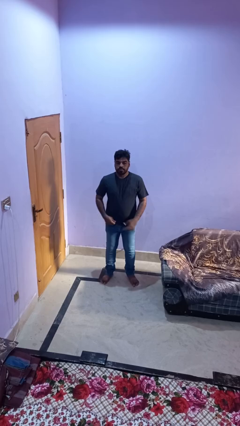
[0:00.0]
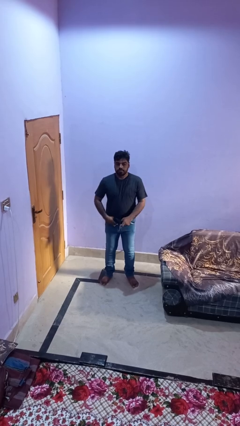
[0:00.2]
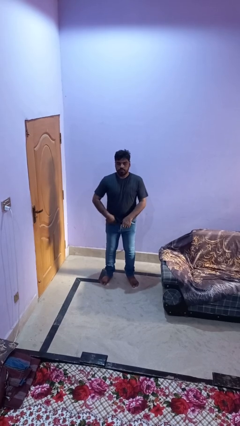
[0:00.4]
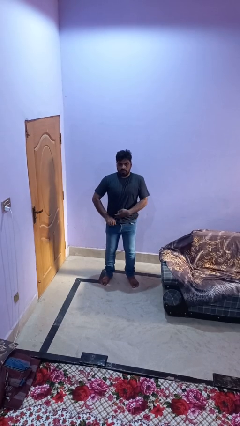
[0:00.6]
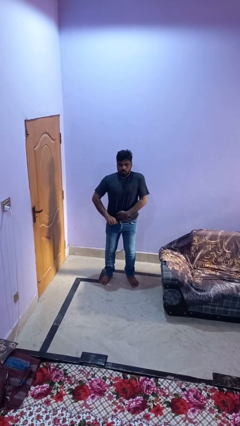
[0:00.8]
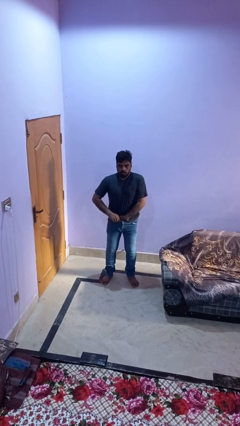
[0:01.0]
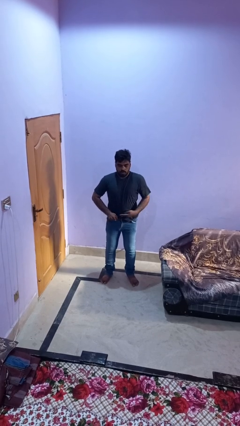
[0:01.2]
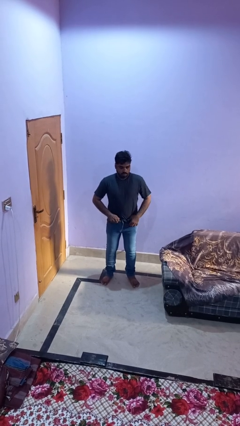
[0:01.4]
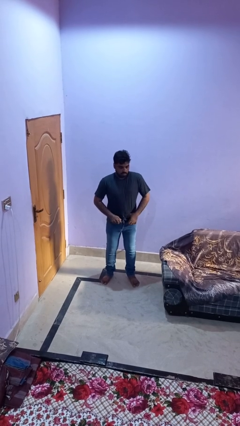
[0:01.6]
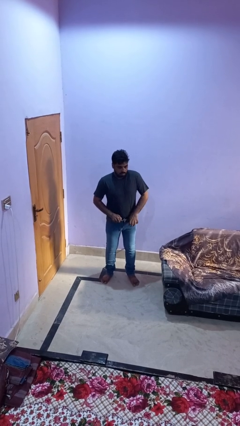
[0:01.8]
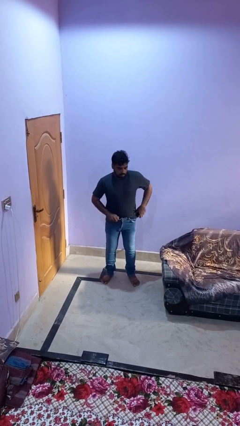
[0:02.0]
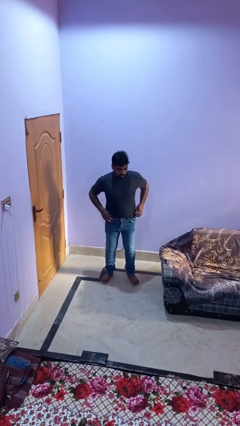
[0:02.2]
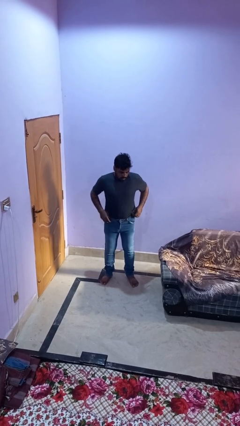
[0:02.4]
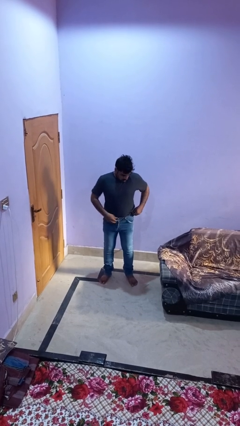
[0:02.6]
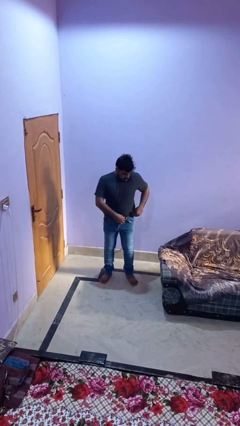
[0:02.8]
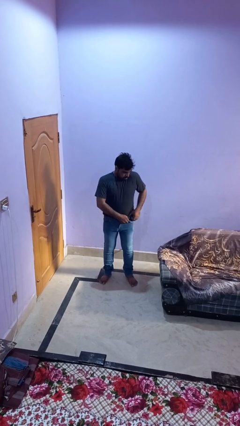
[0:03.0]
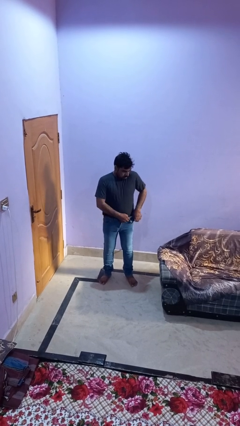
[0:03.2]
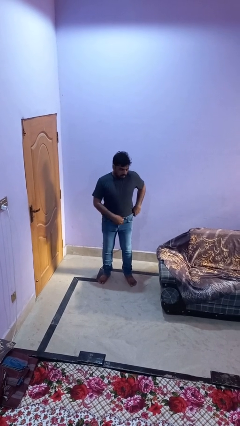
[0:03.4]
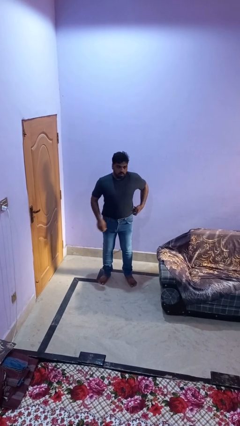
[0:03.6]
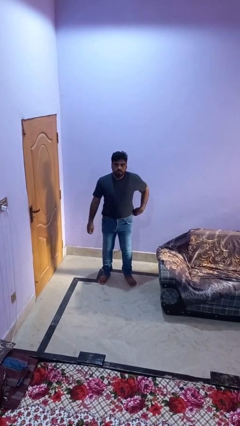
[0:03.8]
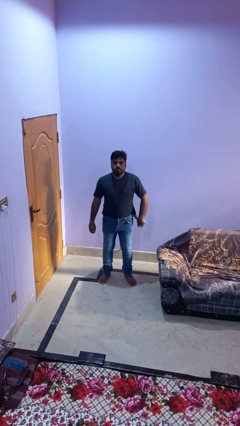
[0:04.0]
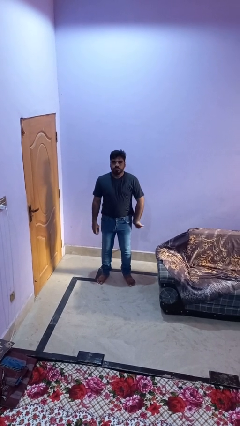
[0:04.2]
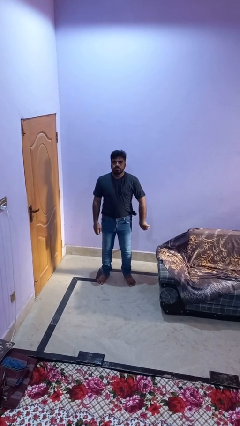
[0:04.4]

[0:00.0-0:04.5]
person tucks in shirt

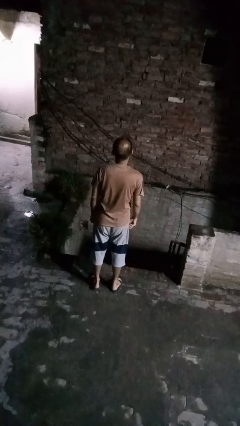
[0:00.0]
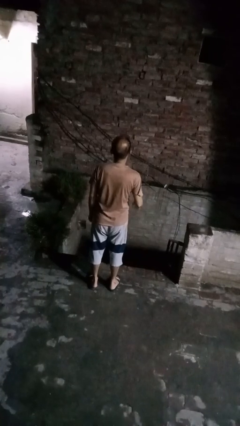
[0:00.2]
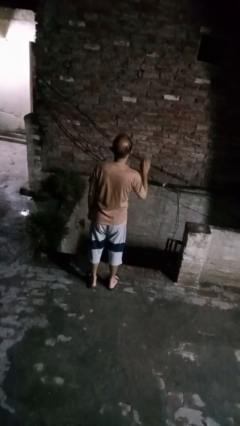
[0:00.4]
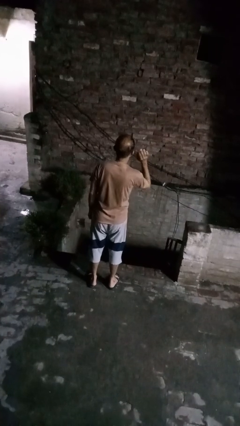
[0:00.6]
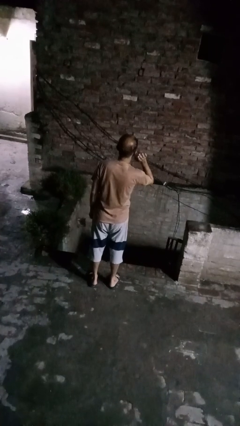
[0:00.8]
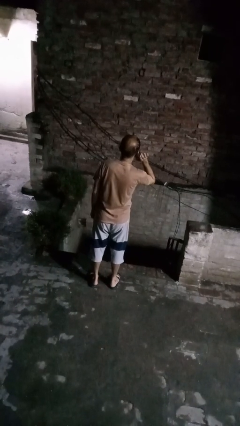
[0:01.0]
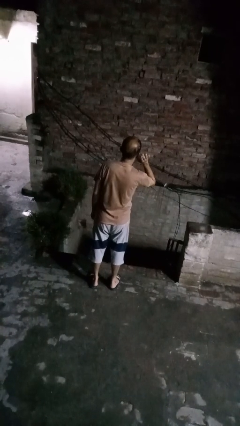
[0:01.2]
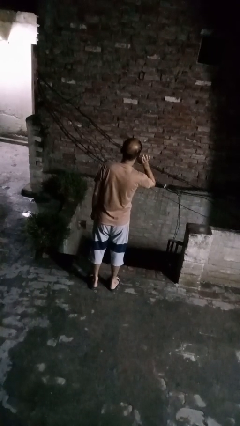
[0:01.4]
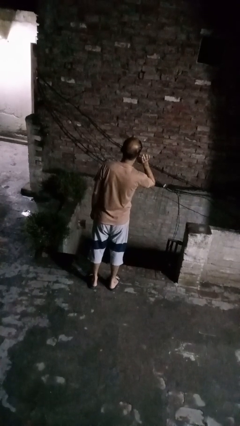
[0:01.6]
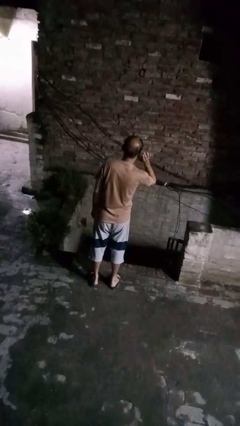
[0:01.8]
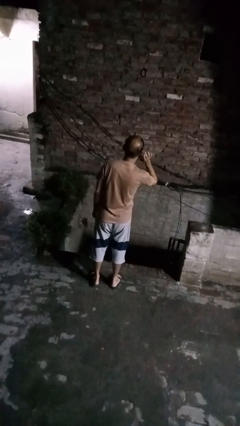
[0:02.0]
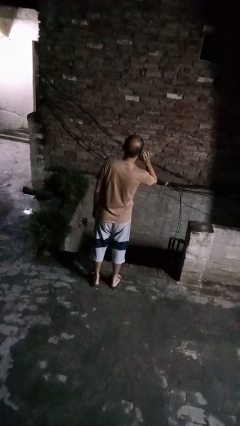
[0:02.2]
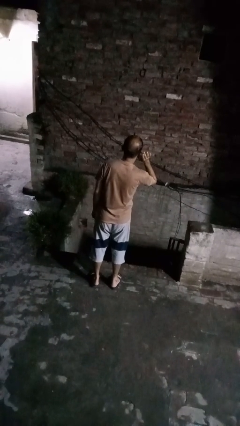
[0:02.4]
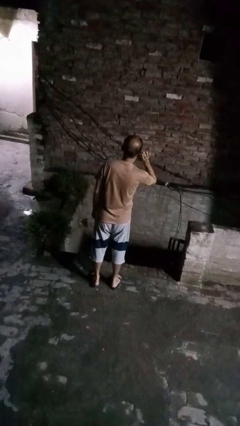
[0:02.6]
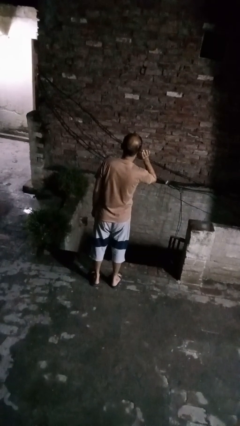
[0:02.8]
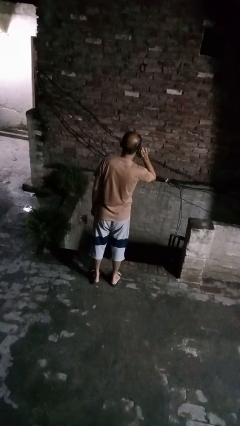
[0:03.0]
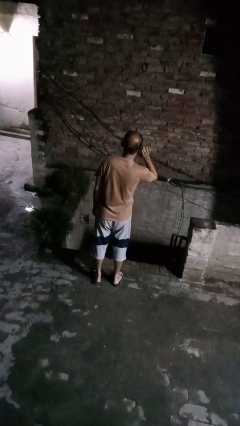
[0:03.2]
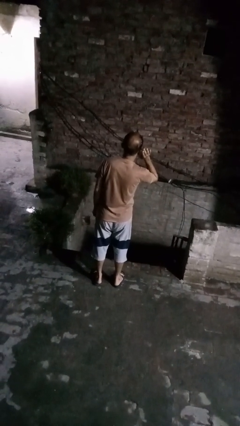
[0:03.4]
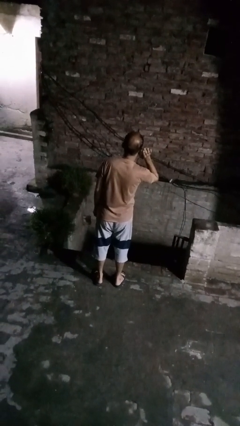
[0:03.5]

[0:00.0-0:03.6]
person gestures listen closely

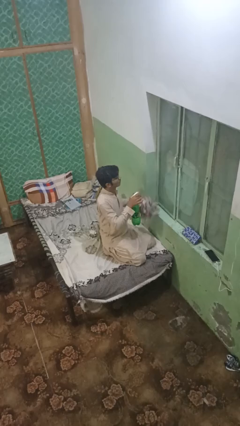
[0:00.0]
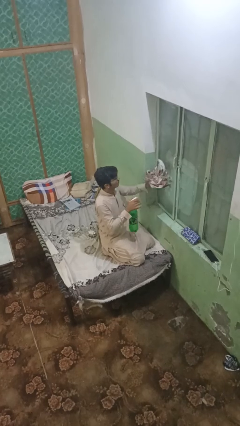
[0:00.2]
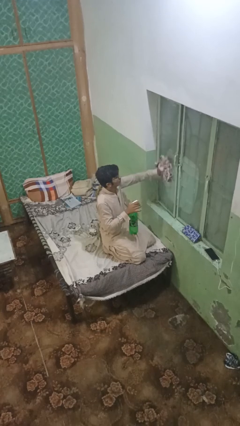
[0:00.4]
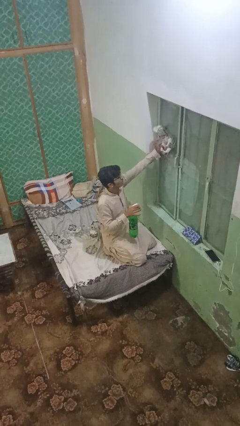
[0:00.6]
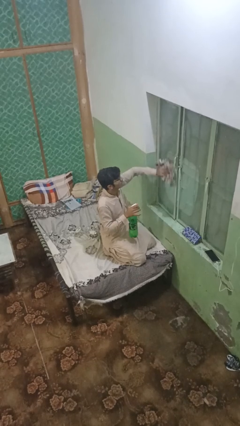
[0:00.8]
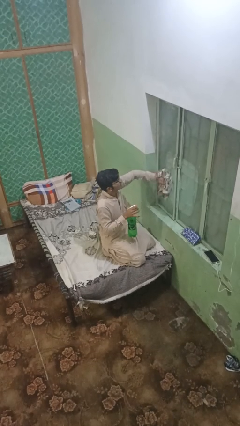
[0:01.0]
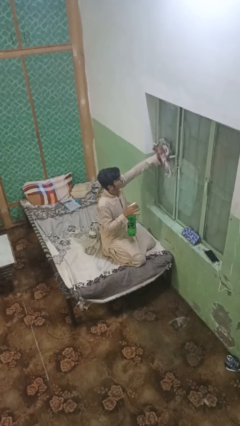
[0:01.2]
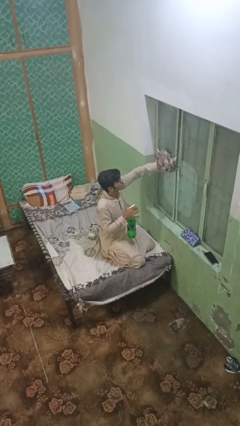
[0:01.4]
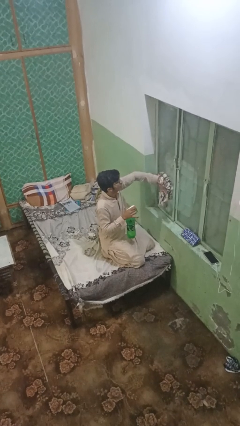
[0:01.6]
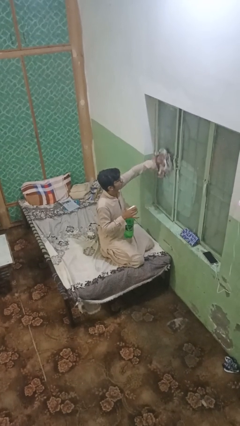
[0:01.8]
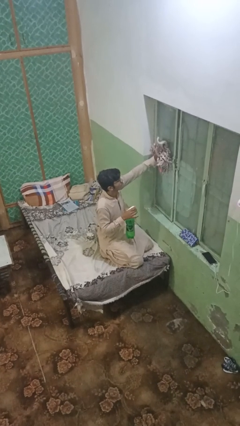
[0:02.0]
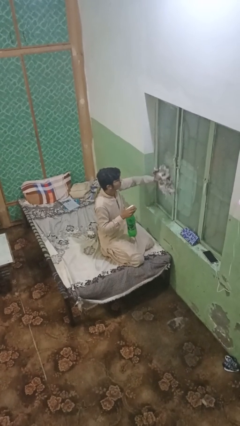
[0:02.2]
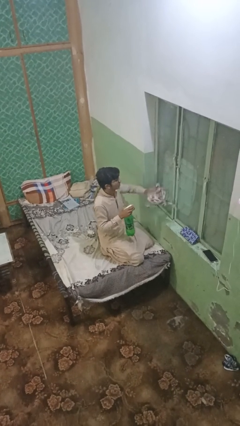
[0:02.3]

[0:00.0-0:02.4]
person washes window

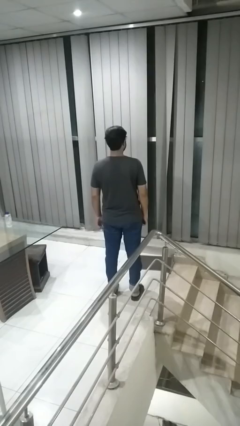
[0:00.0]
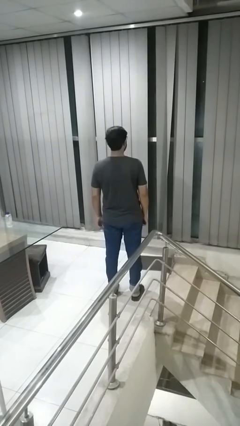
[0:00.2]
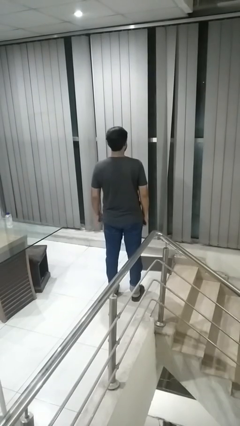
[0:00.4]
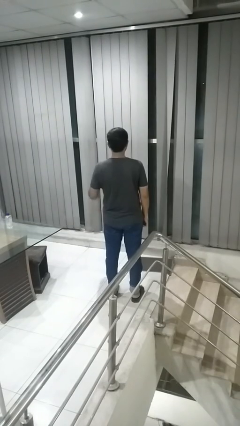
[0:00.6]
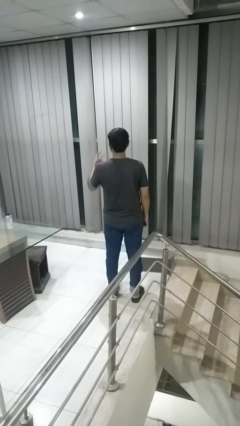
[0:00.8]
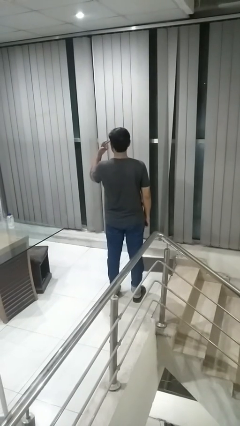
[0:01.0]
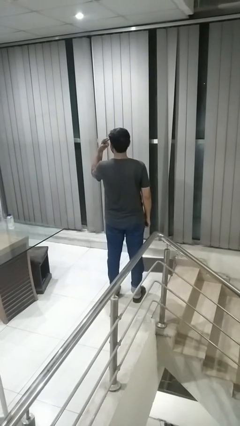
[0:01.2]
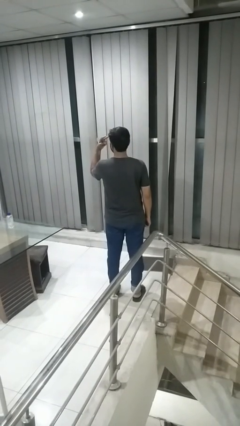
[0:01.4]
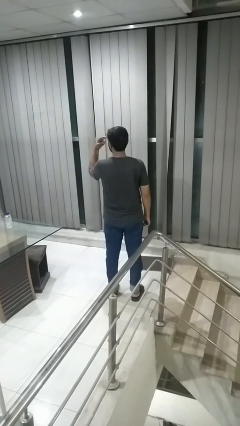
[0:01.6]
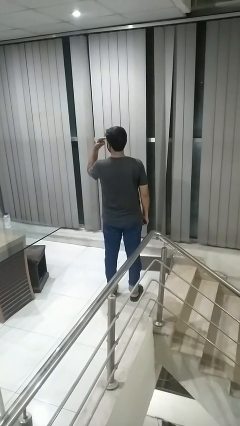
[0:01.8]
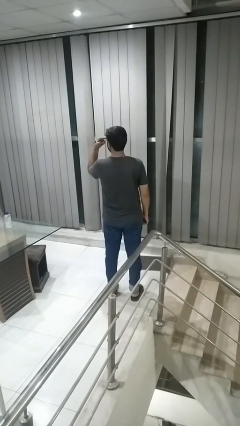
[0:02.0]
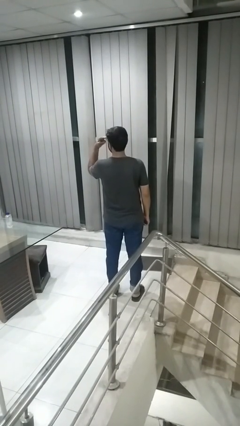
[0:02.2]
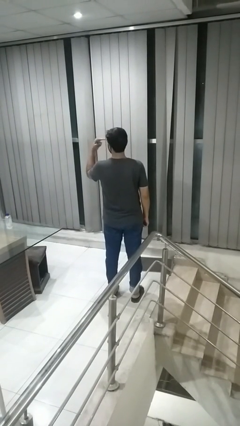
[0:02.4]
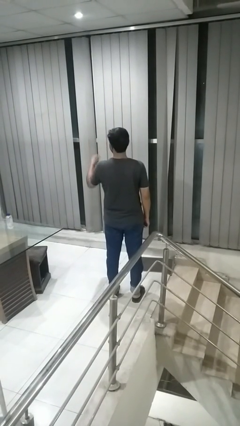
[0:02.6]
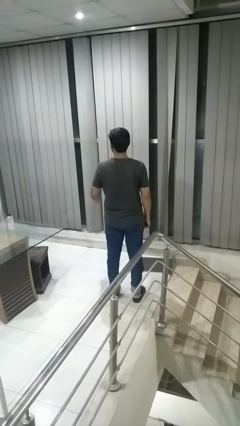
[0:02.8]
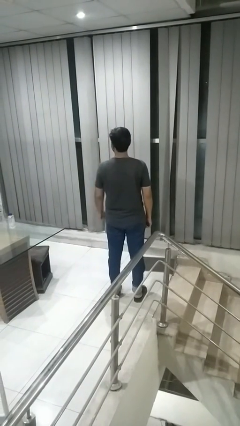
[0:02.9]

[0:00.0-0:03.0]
person gestures watch closely

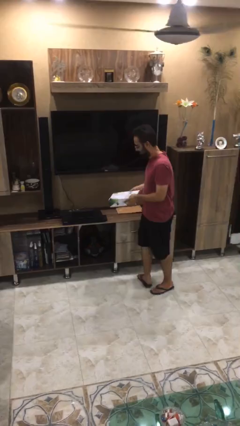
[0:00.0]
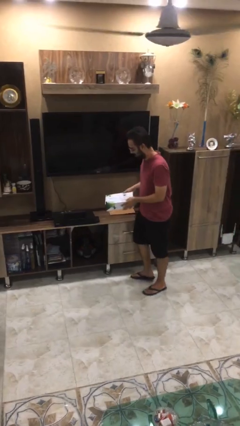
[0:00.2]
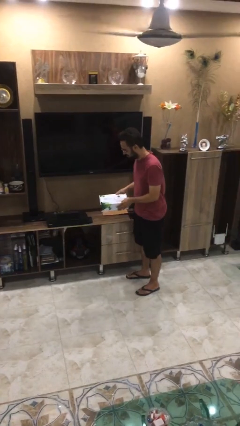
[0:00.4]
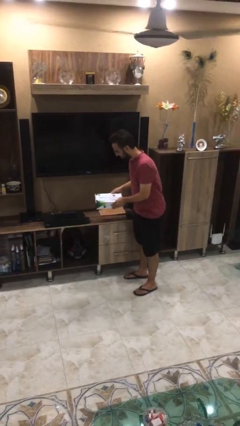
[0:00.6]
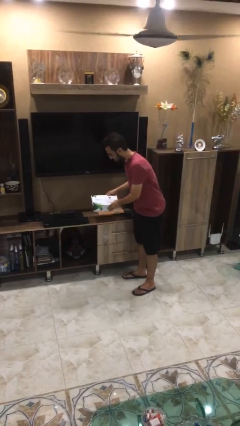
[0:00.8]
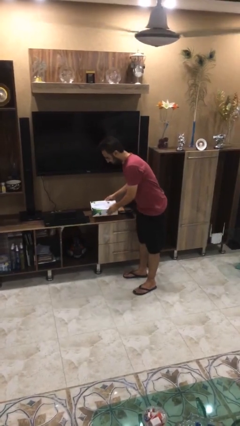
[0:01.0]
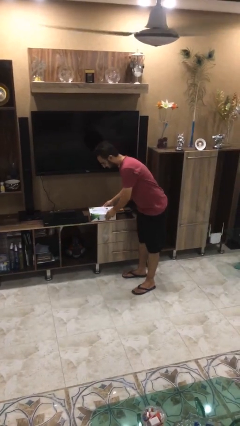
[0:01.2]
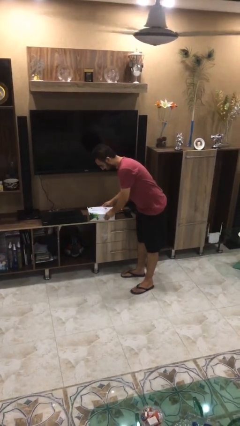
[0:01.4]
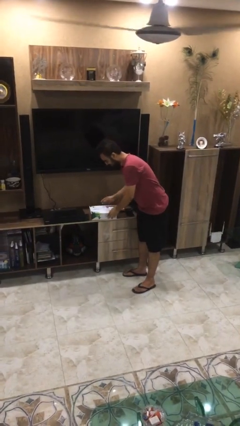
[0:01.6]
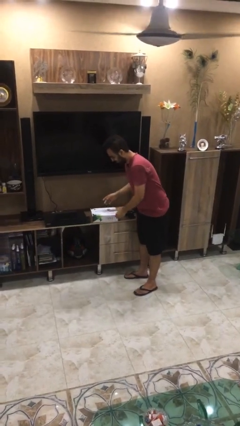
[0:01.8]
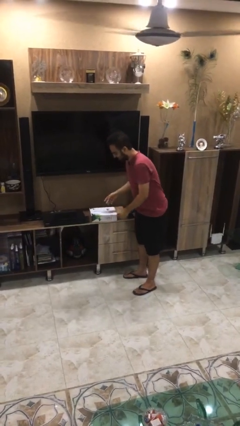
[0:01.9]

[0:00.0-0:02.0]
person puts down object on table

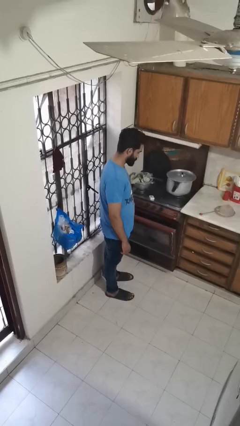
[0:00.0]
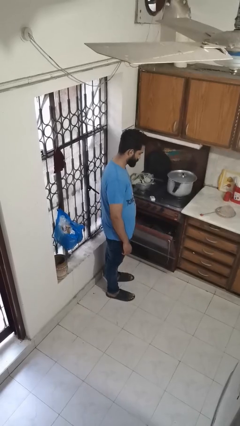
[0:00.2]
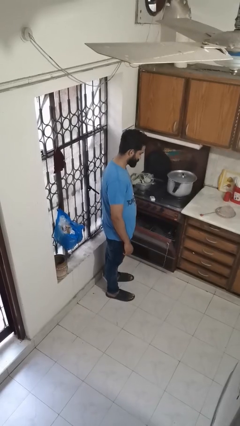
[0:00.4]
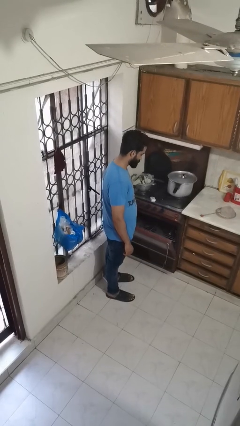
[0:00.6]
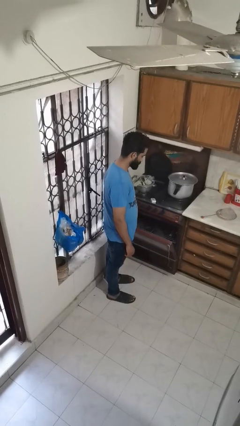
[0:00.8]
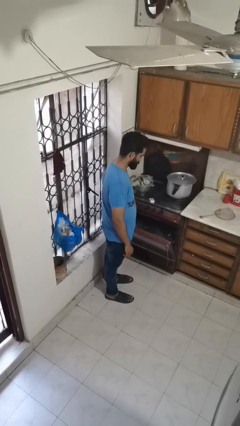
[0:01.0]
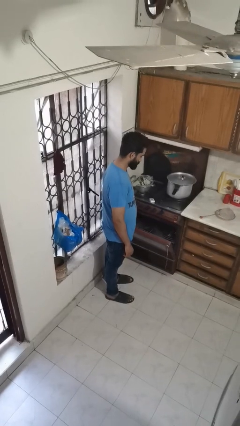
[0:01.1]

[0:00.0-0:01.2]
person opens oven door

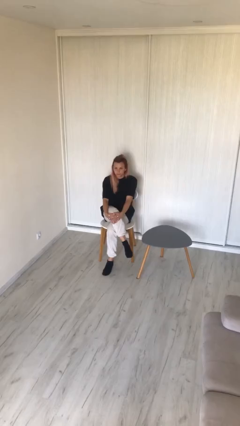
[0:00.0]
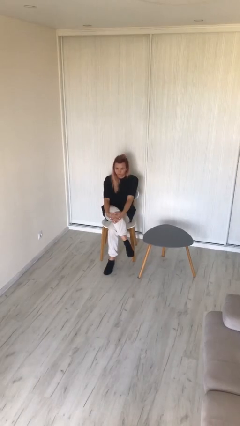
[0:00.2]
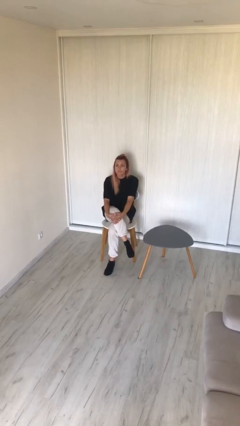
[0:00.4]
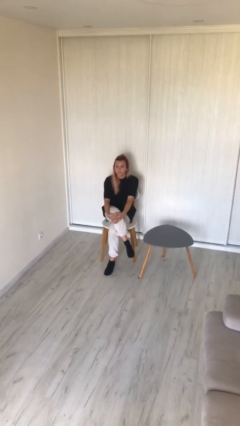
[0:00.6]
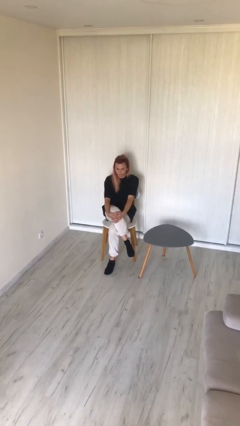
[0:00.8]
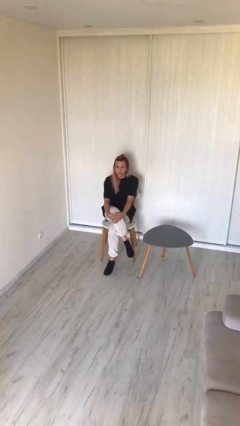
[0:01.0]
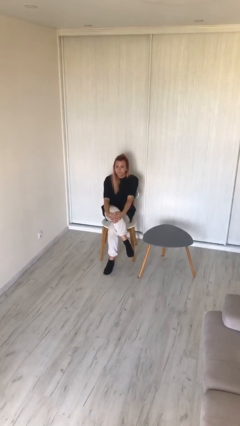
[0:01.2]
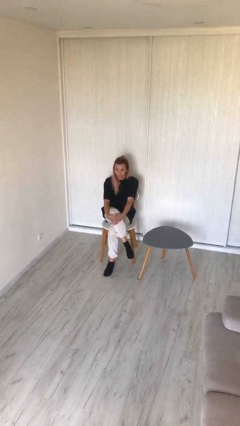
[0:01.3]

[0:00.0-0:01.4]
person nods head
